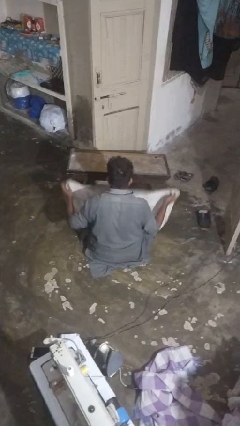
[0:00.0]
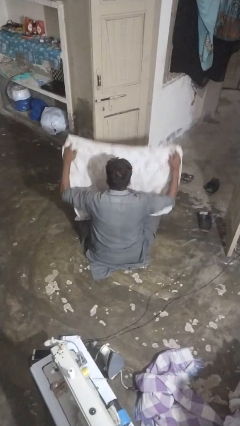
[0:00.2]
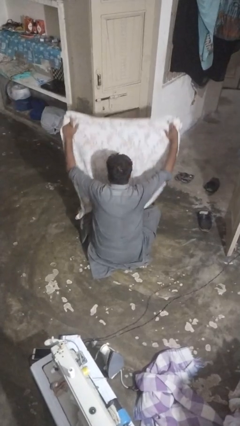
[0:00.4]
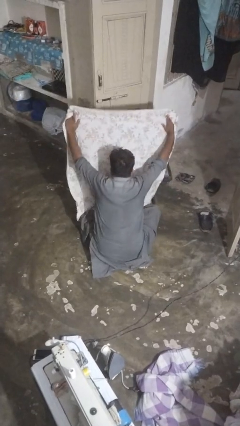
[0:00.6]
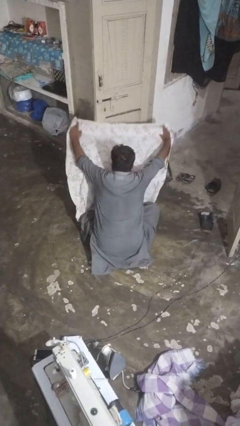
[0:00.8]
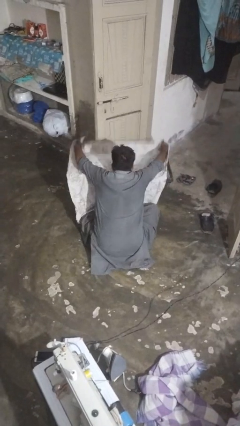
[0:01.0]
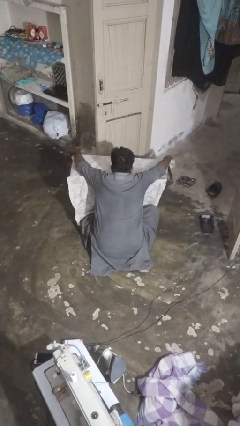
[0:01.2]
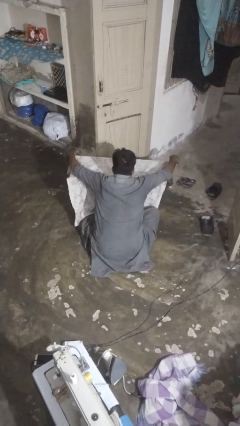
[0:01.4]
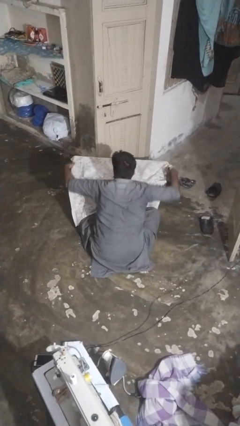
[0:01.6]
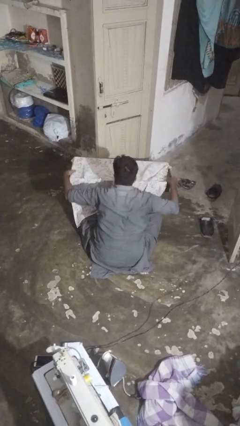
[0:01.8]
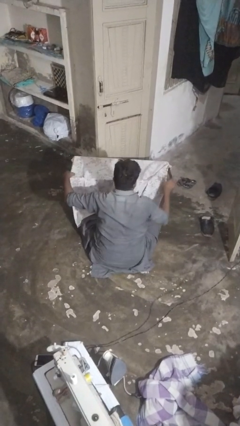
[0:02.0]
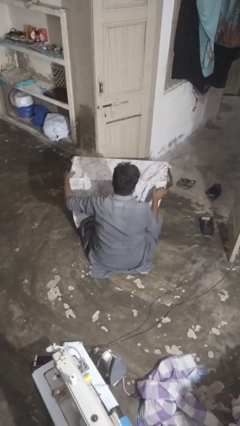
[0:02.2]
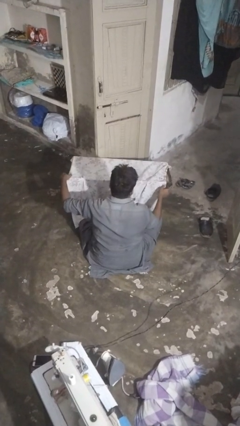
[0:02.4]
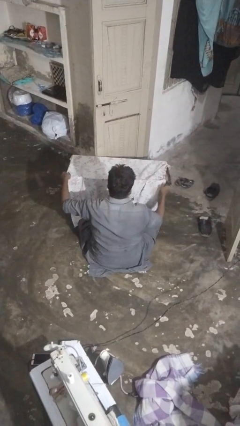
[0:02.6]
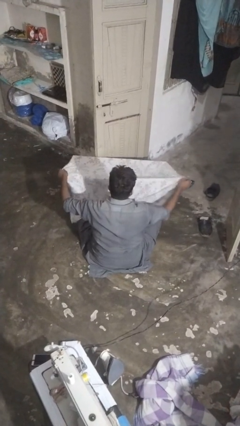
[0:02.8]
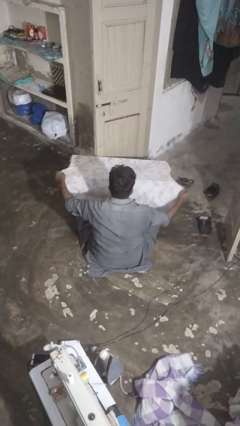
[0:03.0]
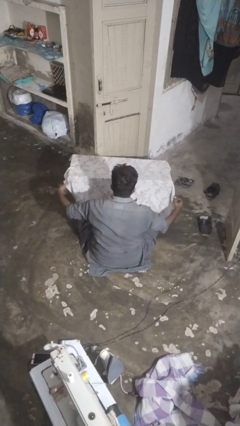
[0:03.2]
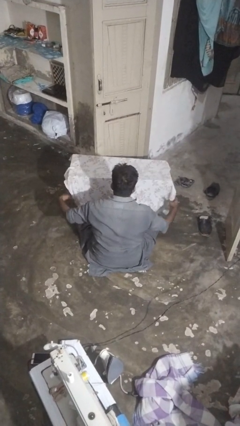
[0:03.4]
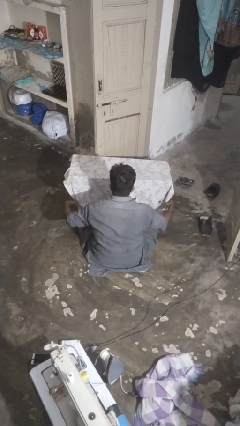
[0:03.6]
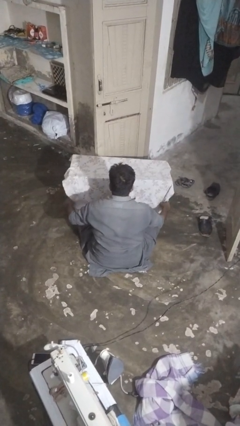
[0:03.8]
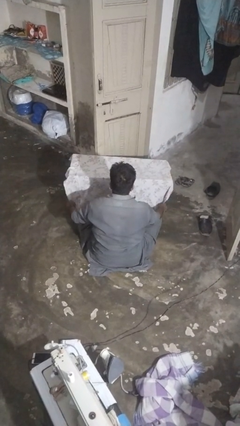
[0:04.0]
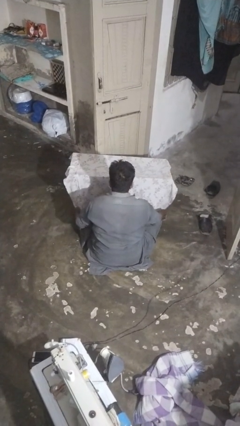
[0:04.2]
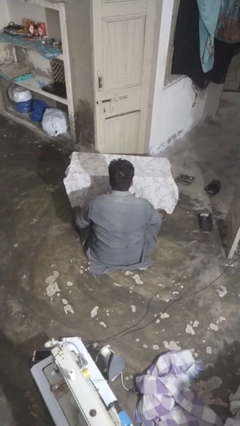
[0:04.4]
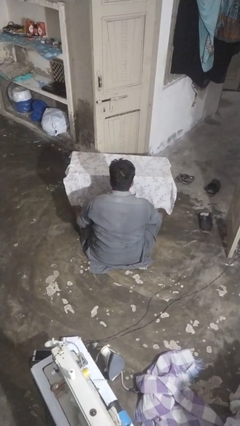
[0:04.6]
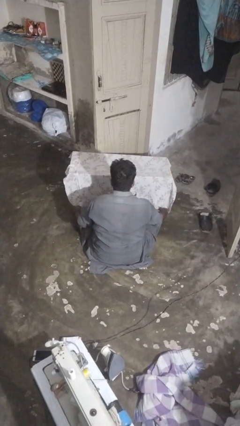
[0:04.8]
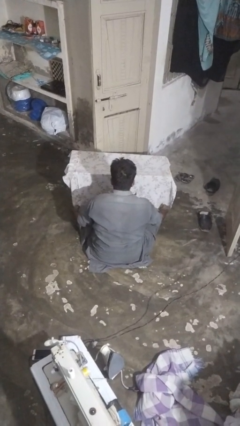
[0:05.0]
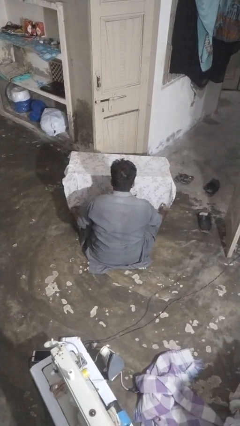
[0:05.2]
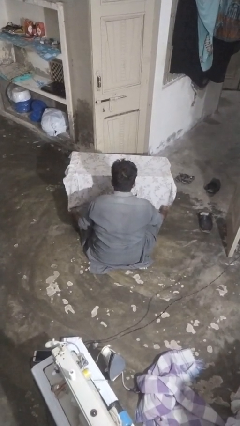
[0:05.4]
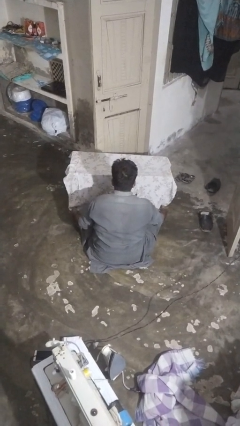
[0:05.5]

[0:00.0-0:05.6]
person spreads tablecloth

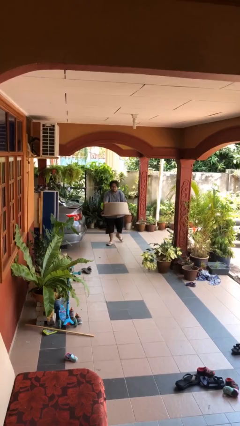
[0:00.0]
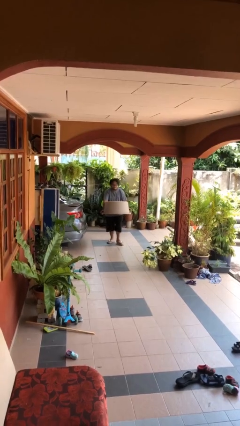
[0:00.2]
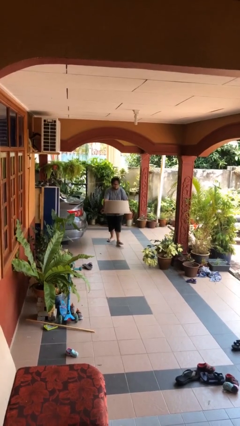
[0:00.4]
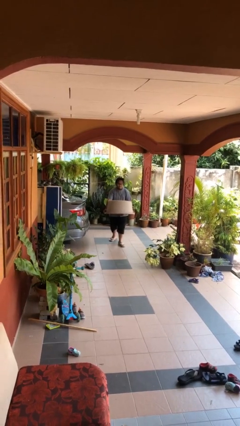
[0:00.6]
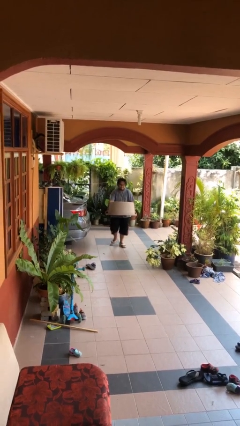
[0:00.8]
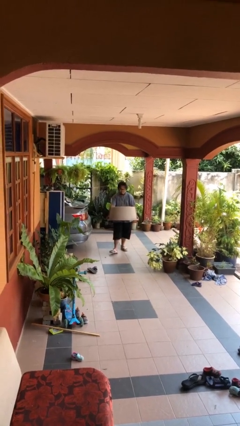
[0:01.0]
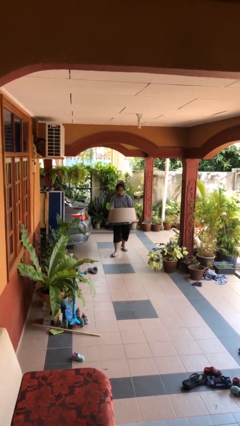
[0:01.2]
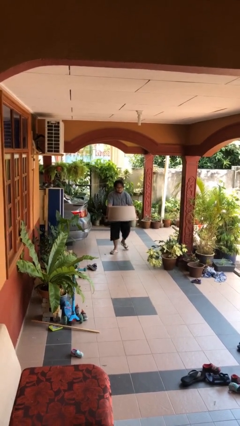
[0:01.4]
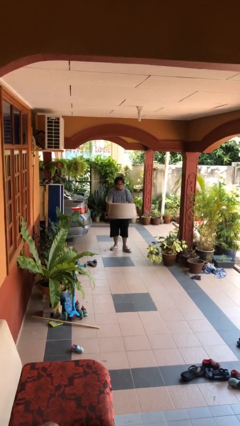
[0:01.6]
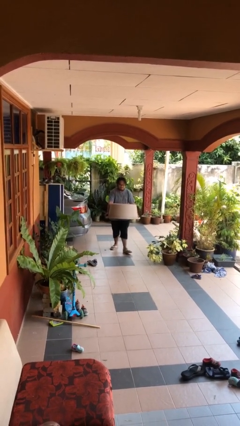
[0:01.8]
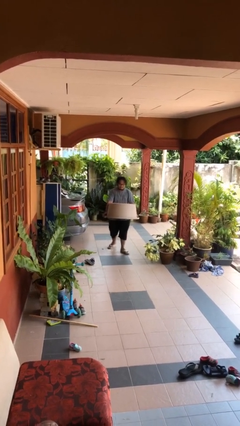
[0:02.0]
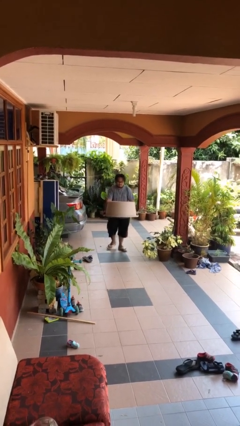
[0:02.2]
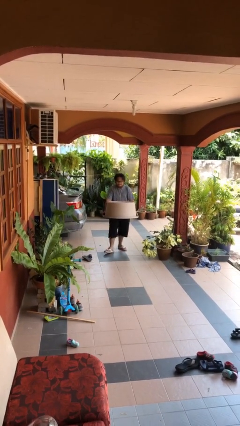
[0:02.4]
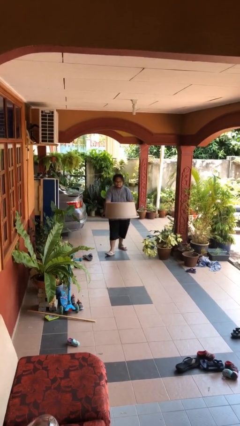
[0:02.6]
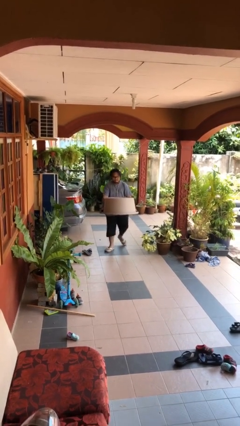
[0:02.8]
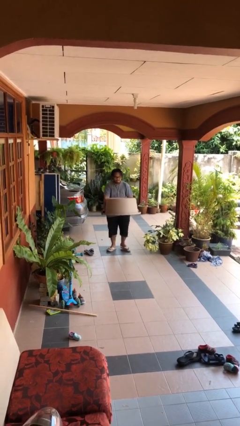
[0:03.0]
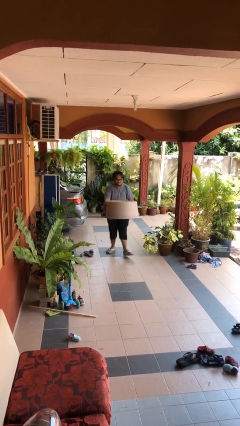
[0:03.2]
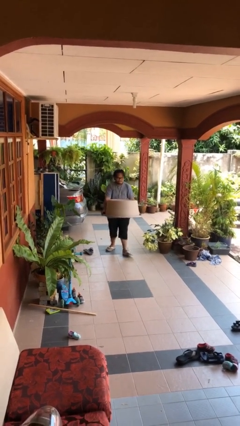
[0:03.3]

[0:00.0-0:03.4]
person carries heavy object

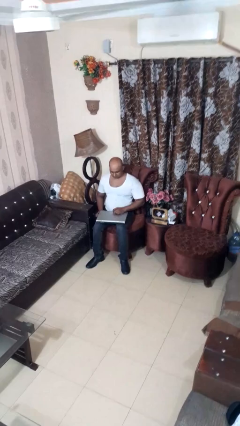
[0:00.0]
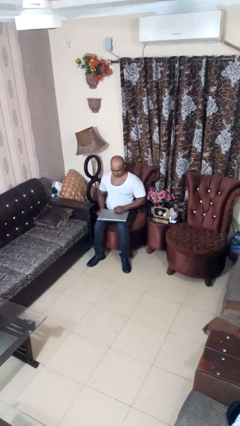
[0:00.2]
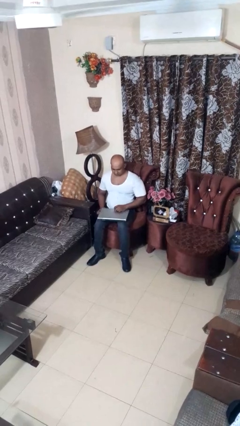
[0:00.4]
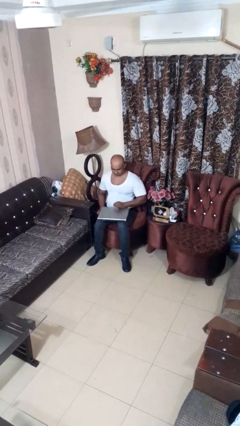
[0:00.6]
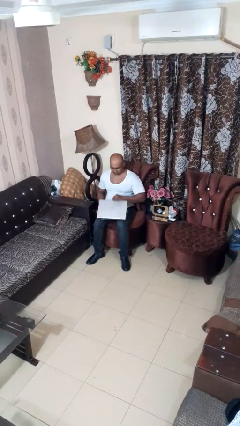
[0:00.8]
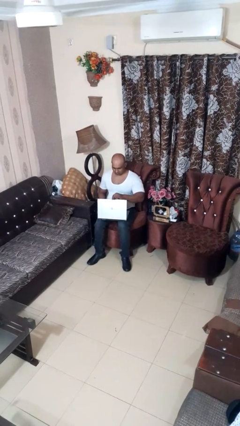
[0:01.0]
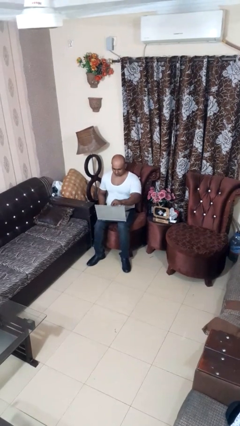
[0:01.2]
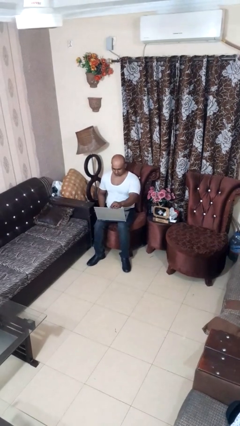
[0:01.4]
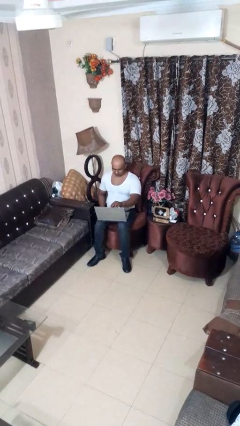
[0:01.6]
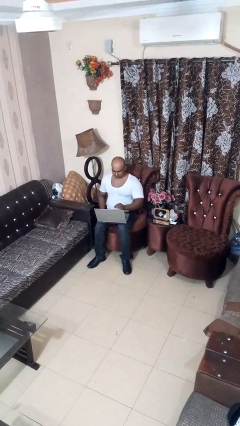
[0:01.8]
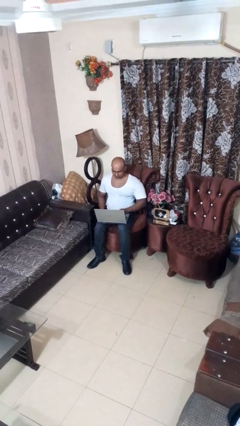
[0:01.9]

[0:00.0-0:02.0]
person opens laptop

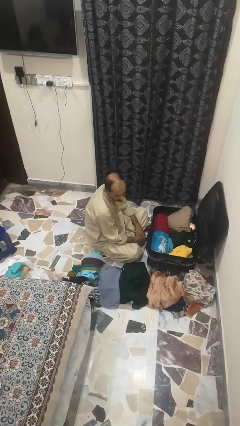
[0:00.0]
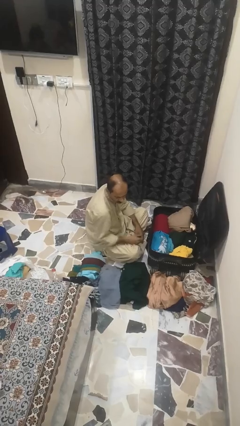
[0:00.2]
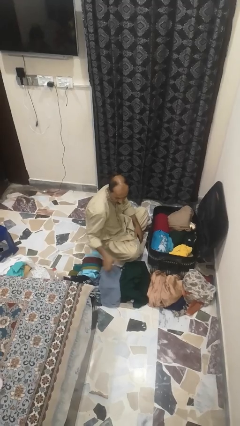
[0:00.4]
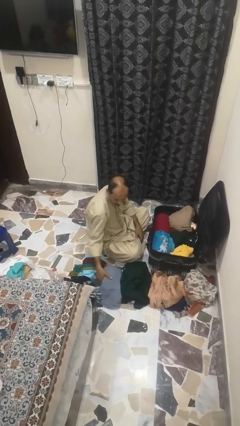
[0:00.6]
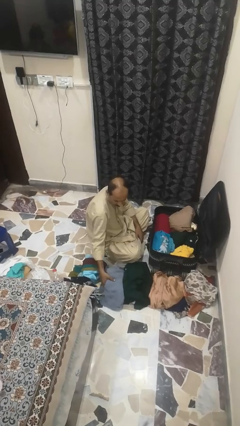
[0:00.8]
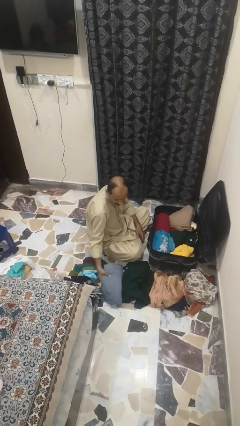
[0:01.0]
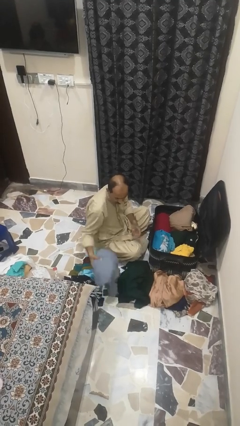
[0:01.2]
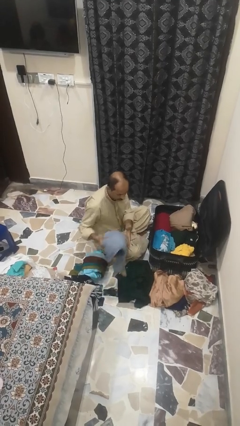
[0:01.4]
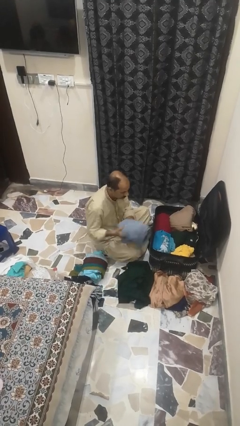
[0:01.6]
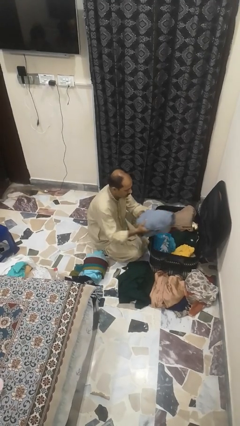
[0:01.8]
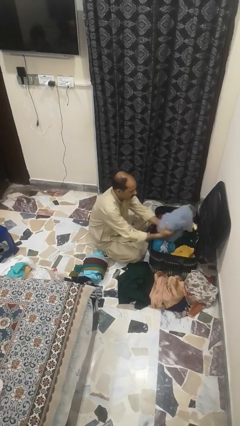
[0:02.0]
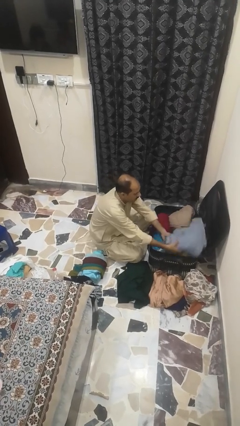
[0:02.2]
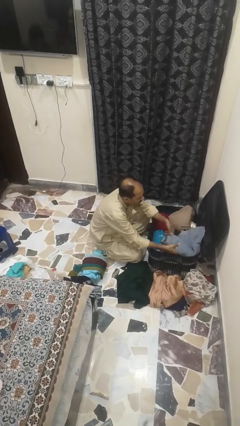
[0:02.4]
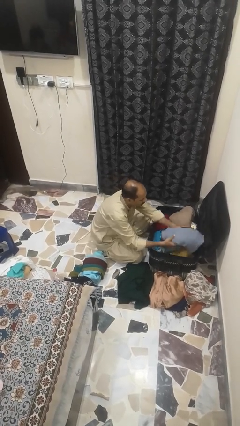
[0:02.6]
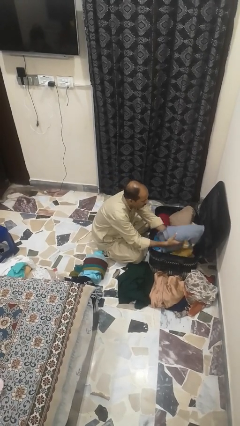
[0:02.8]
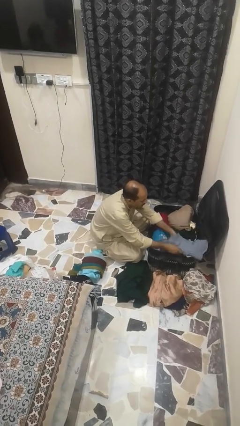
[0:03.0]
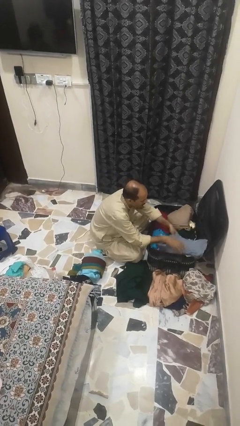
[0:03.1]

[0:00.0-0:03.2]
person loads clothes into suitcase

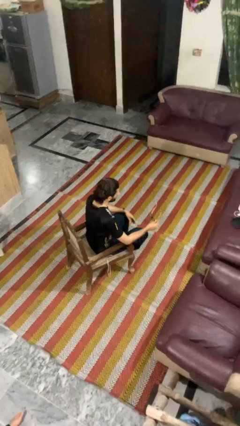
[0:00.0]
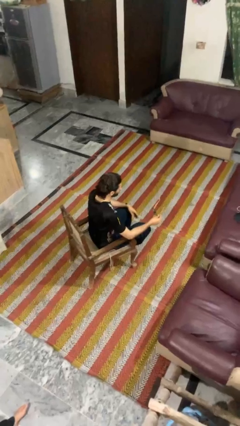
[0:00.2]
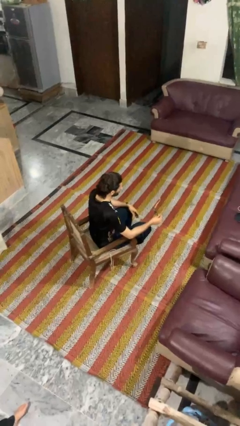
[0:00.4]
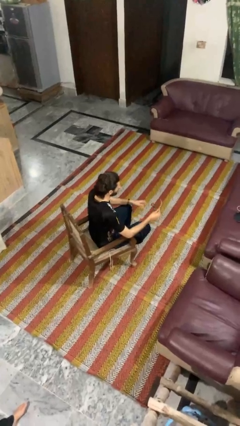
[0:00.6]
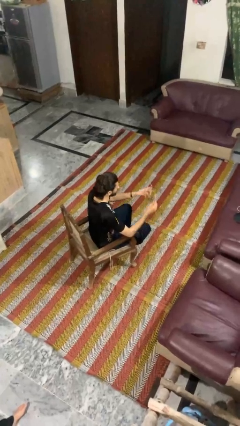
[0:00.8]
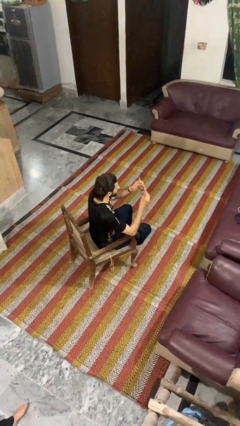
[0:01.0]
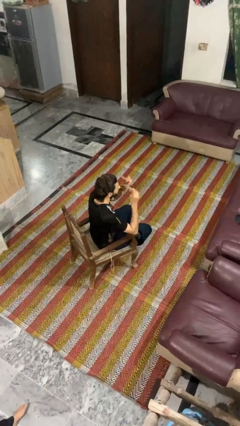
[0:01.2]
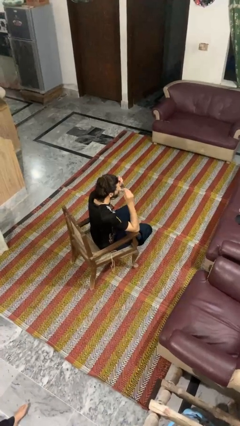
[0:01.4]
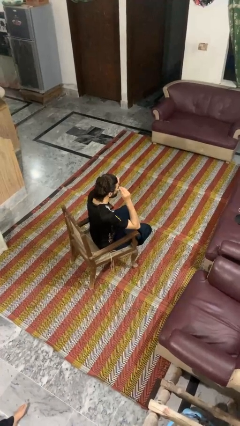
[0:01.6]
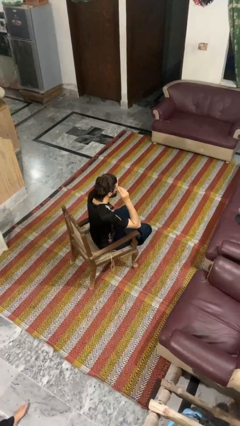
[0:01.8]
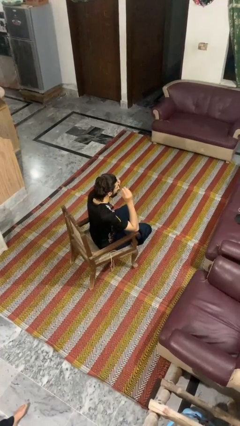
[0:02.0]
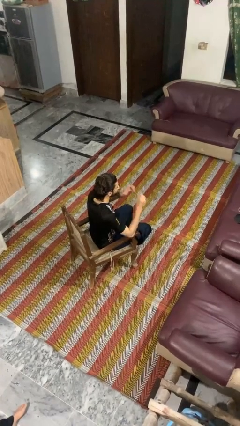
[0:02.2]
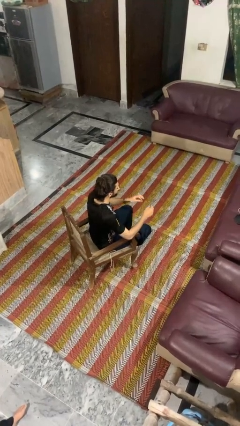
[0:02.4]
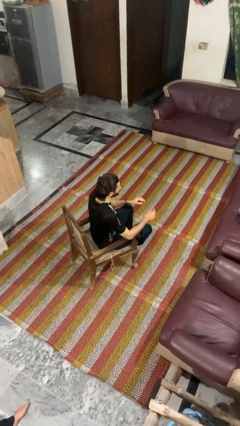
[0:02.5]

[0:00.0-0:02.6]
person puts on glasses

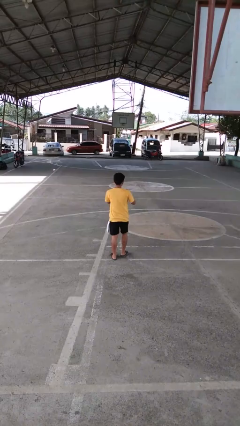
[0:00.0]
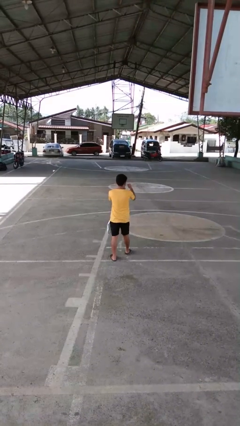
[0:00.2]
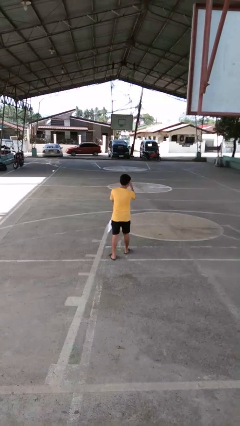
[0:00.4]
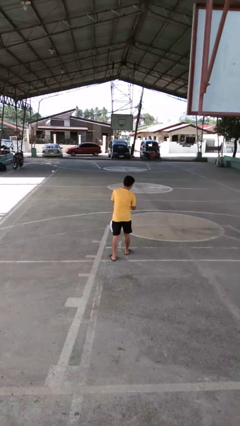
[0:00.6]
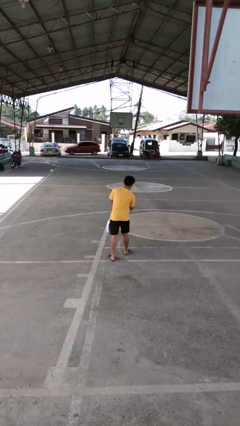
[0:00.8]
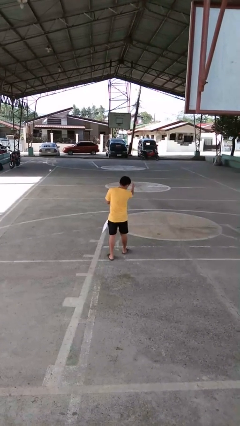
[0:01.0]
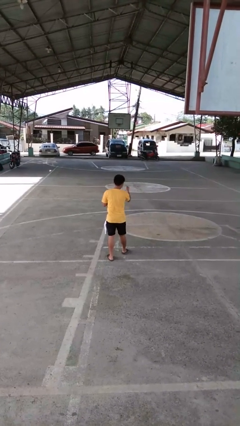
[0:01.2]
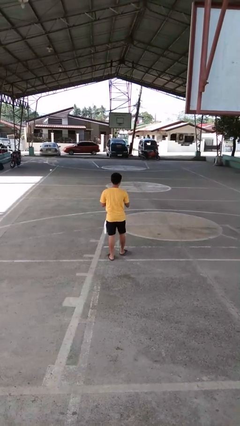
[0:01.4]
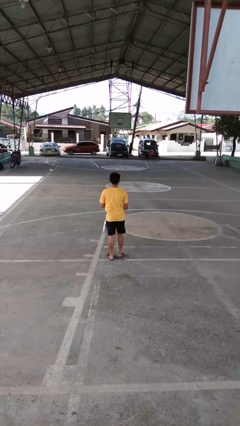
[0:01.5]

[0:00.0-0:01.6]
person punches
